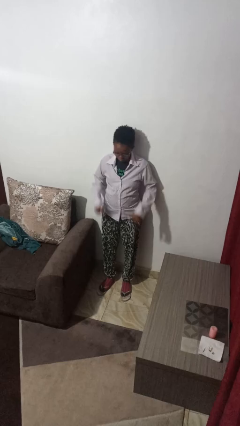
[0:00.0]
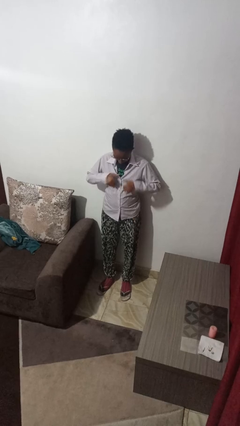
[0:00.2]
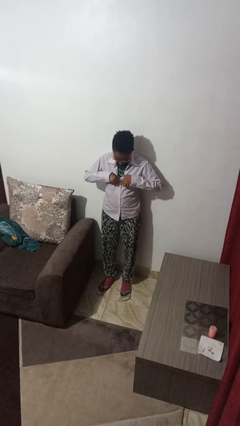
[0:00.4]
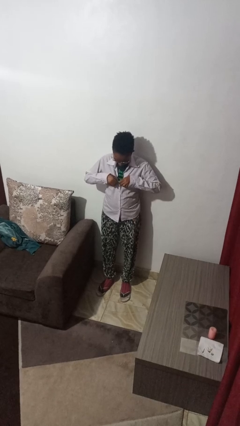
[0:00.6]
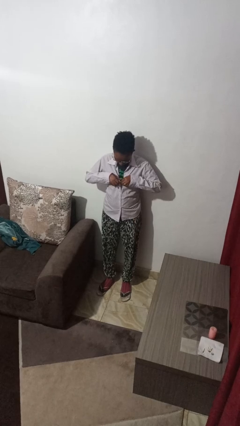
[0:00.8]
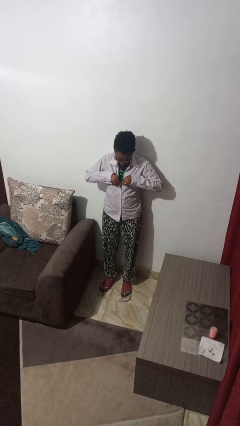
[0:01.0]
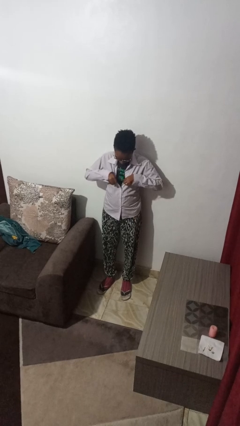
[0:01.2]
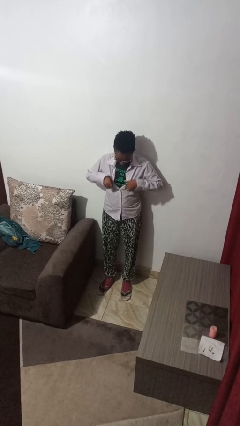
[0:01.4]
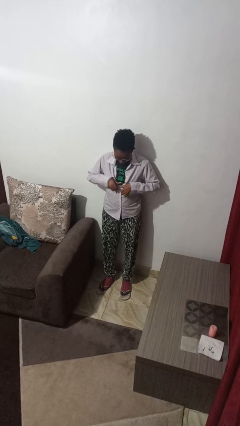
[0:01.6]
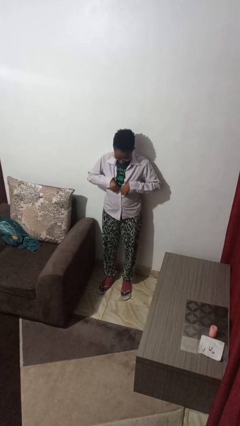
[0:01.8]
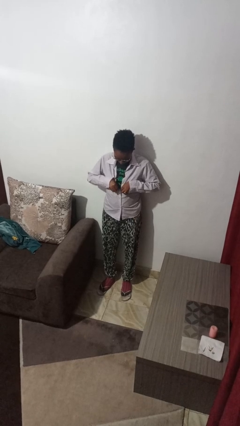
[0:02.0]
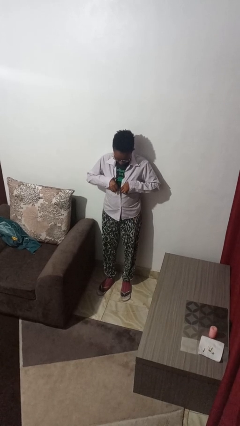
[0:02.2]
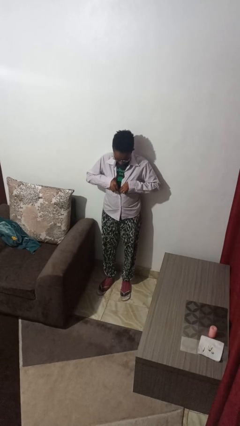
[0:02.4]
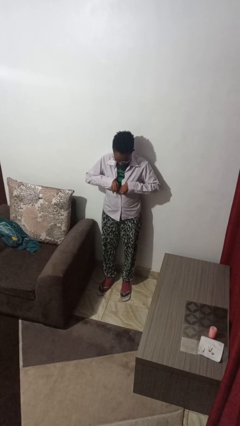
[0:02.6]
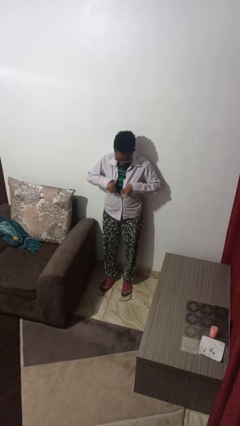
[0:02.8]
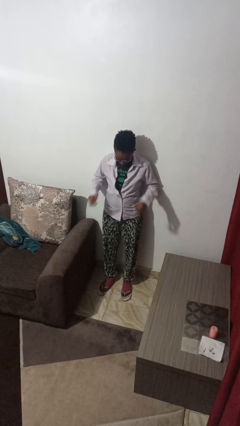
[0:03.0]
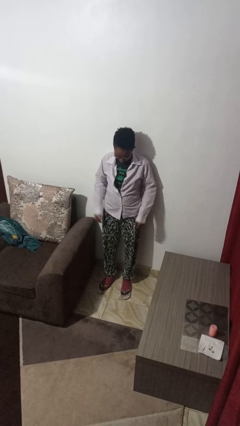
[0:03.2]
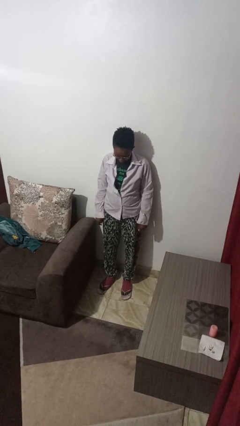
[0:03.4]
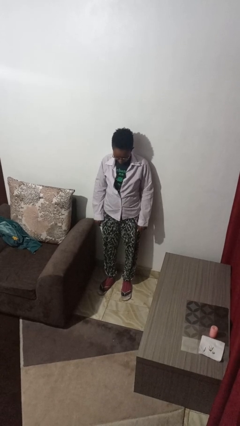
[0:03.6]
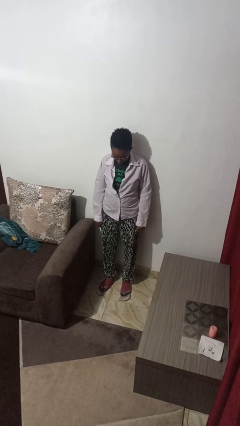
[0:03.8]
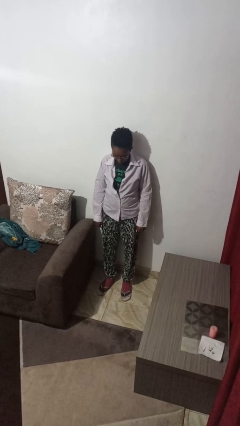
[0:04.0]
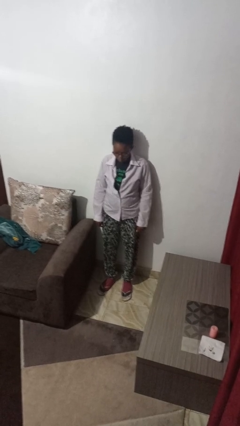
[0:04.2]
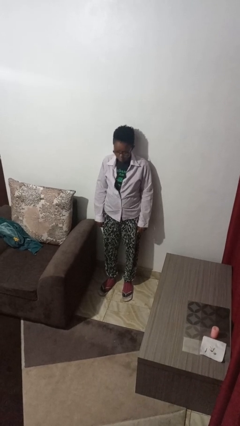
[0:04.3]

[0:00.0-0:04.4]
person unbuttons shirt

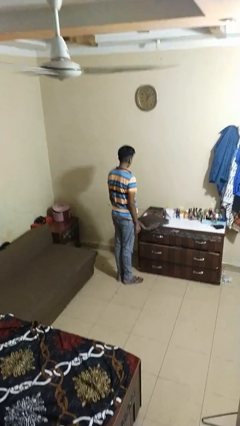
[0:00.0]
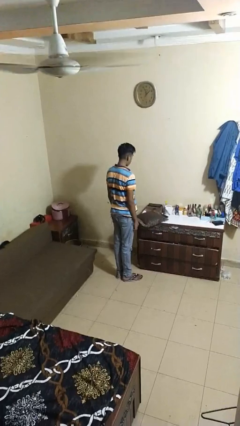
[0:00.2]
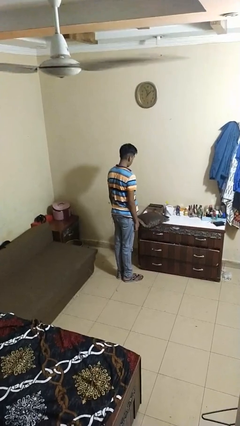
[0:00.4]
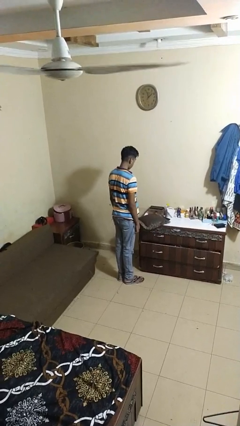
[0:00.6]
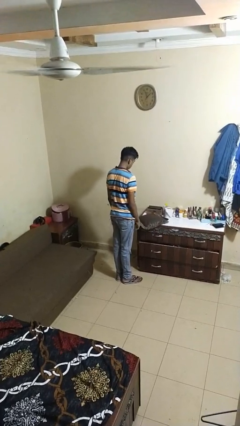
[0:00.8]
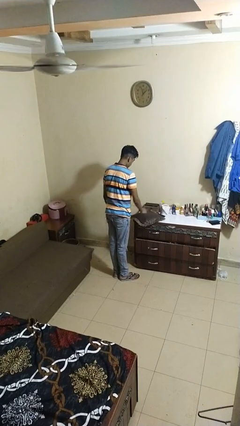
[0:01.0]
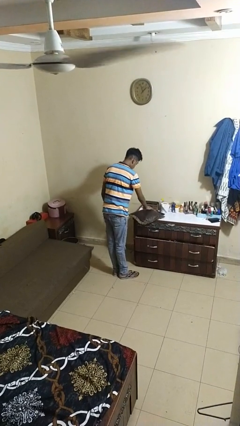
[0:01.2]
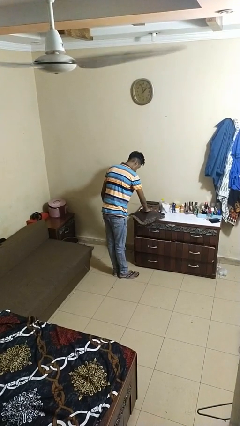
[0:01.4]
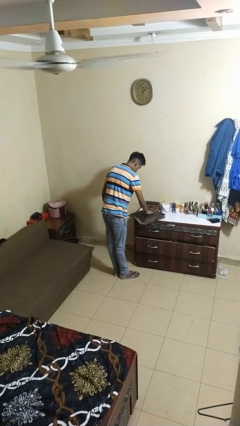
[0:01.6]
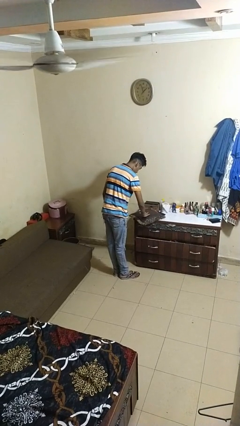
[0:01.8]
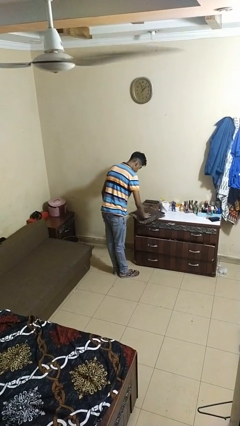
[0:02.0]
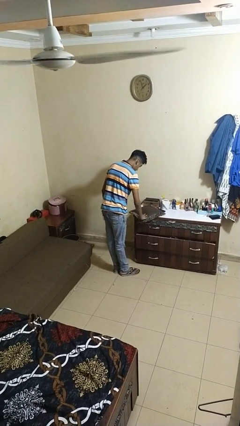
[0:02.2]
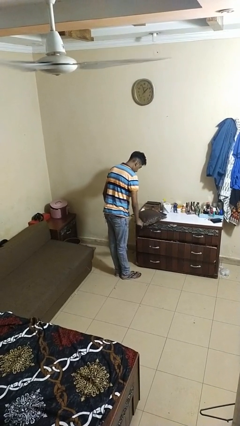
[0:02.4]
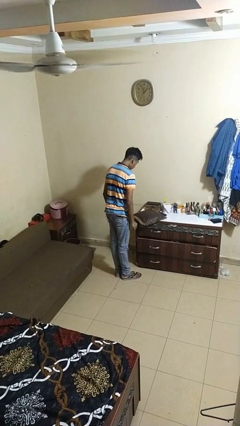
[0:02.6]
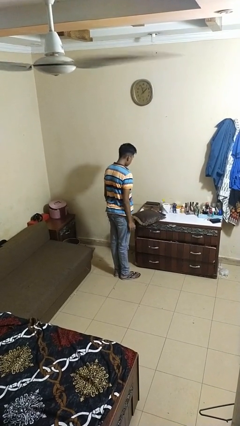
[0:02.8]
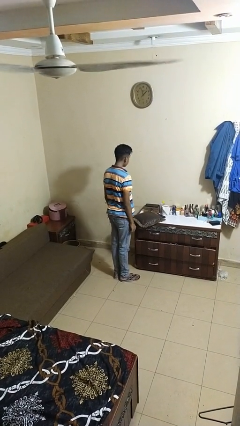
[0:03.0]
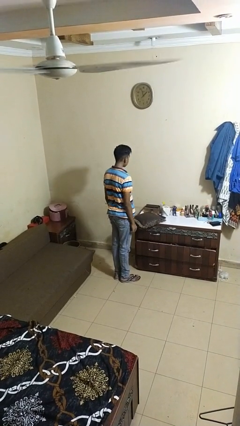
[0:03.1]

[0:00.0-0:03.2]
person waves hand over object

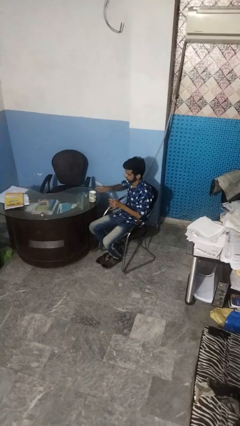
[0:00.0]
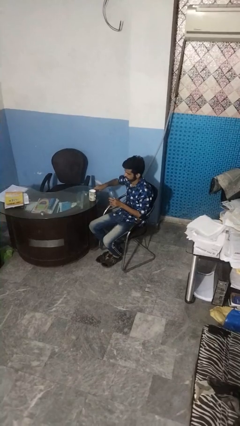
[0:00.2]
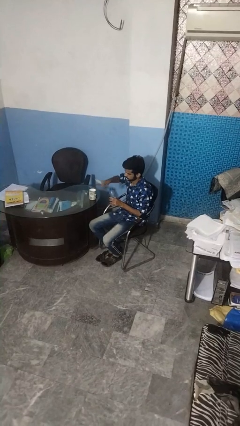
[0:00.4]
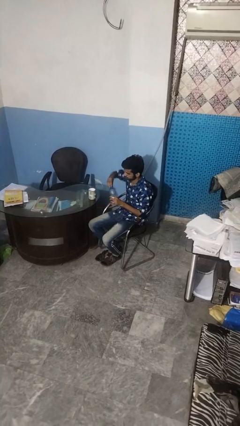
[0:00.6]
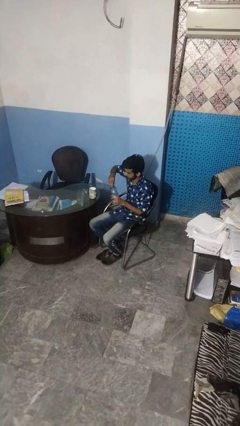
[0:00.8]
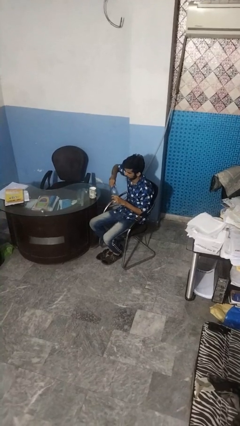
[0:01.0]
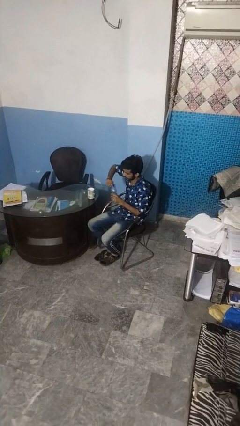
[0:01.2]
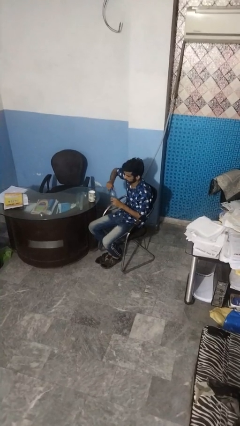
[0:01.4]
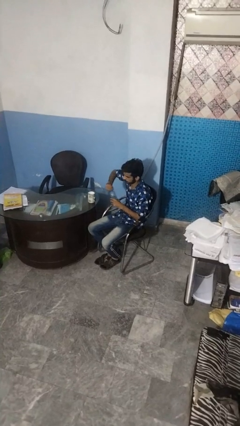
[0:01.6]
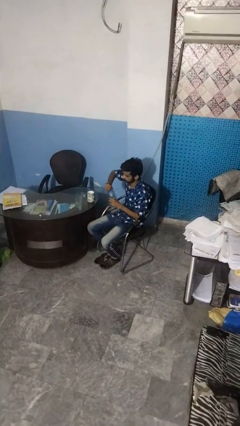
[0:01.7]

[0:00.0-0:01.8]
person screws lid to bottle

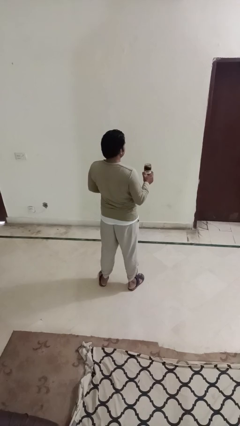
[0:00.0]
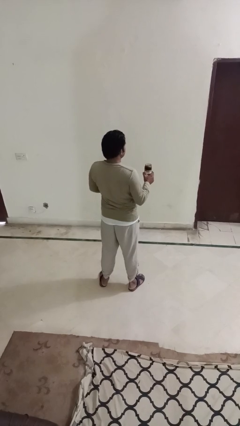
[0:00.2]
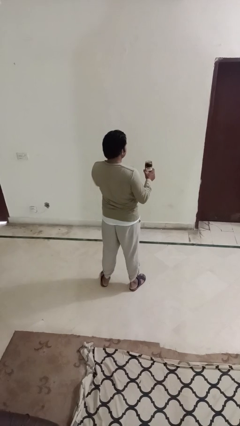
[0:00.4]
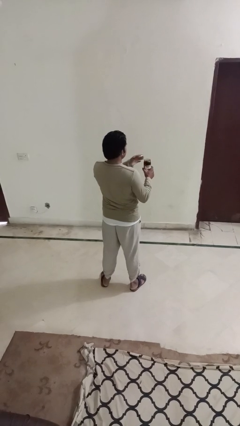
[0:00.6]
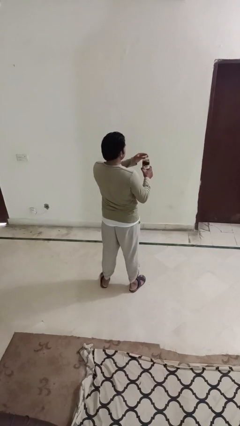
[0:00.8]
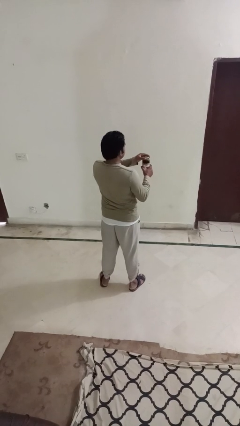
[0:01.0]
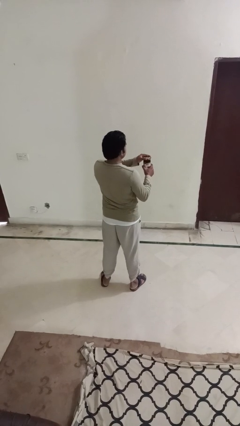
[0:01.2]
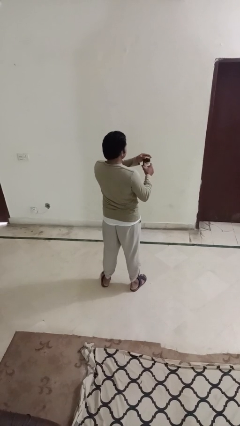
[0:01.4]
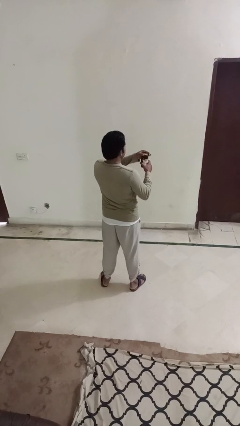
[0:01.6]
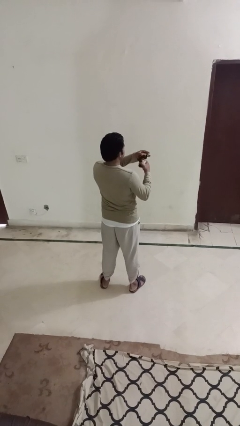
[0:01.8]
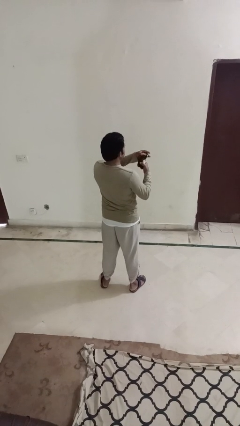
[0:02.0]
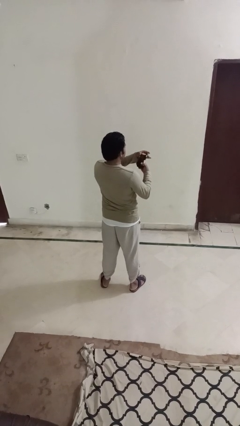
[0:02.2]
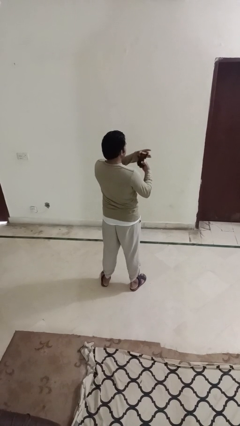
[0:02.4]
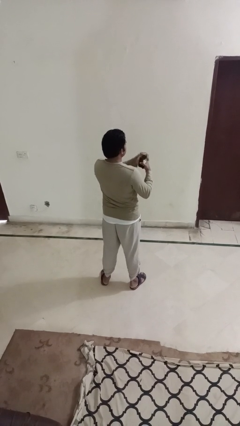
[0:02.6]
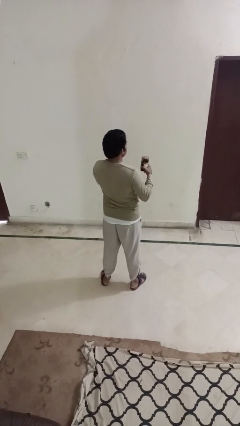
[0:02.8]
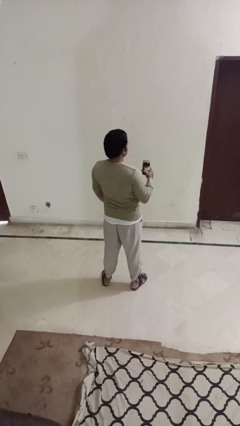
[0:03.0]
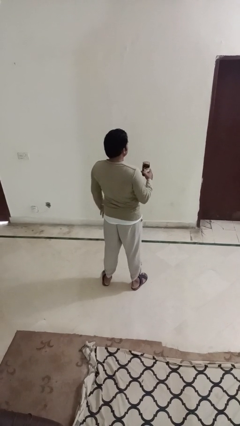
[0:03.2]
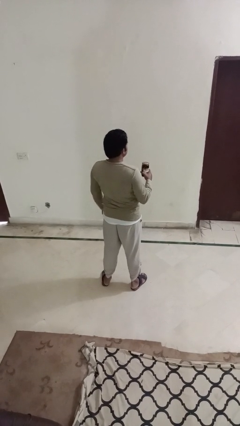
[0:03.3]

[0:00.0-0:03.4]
person closes jar

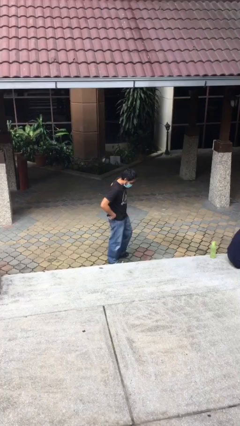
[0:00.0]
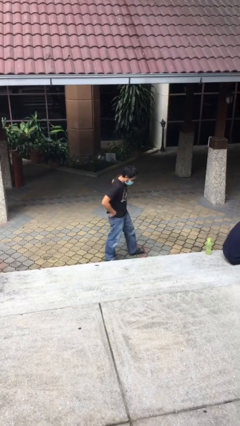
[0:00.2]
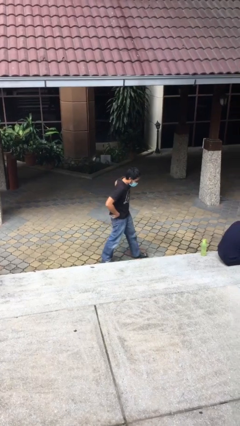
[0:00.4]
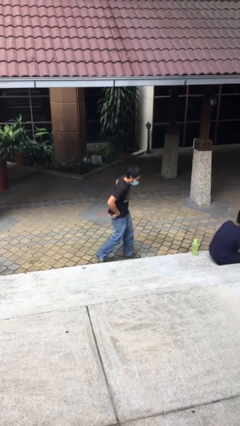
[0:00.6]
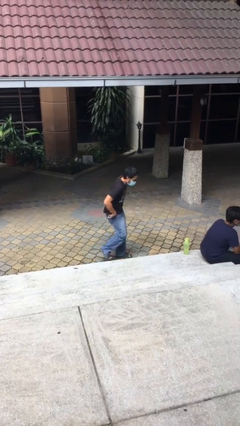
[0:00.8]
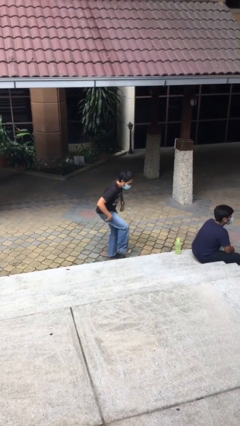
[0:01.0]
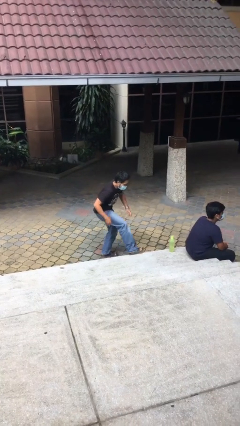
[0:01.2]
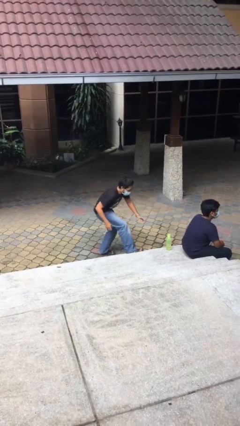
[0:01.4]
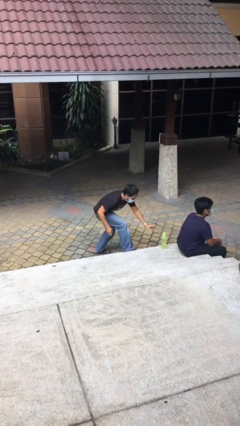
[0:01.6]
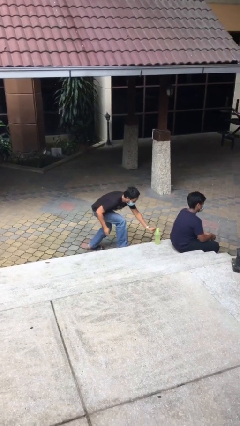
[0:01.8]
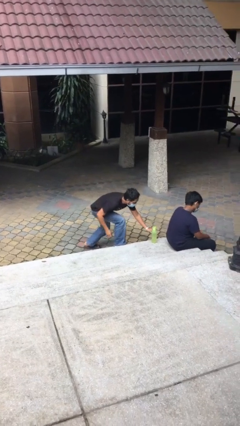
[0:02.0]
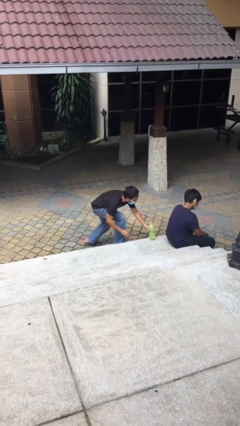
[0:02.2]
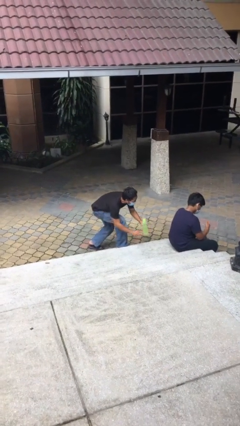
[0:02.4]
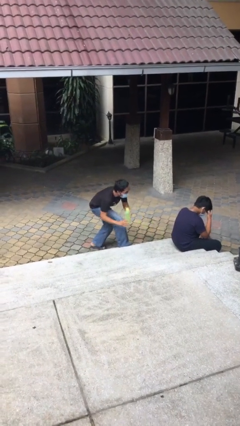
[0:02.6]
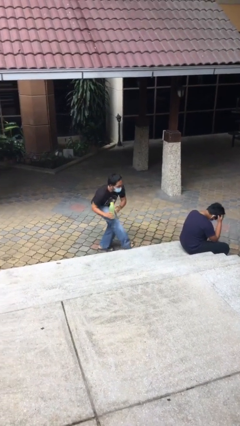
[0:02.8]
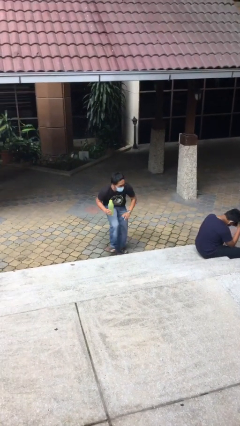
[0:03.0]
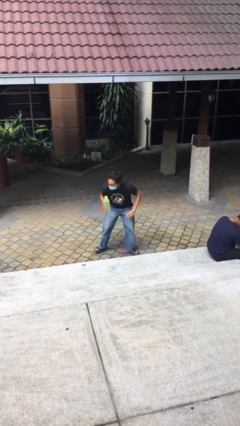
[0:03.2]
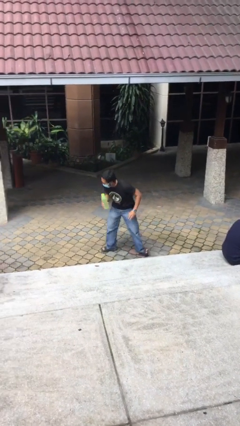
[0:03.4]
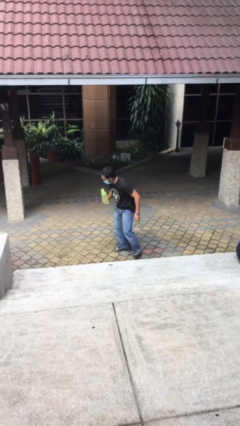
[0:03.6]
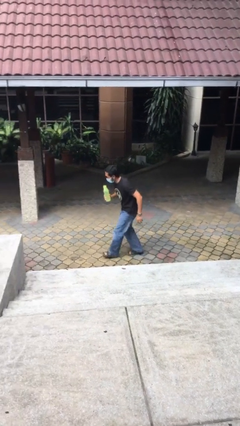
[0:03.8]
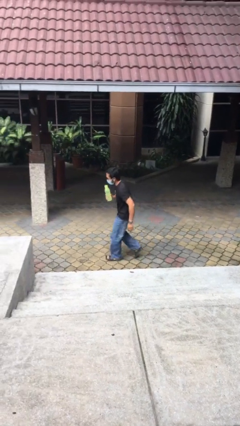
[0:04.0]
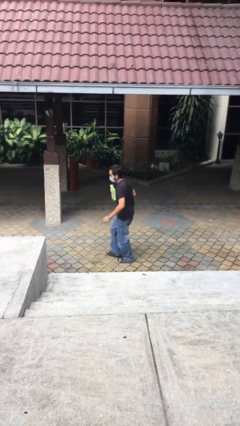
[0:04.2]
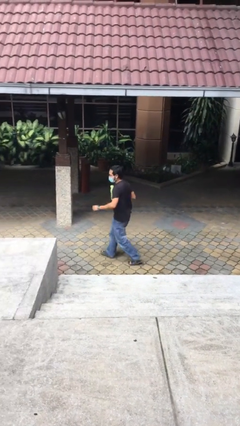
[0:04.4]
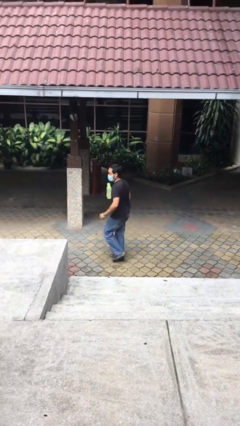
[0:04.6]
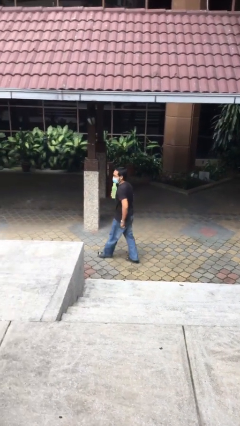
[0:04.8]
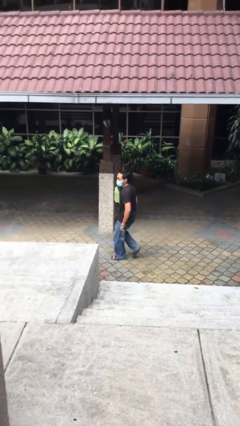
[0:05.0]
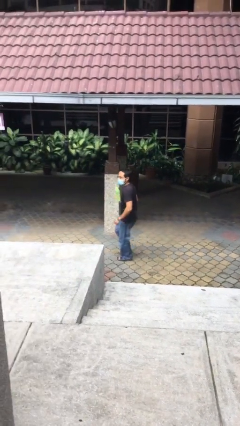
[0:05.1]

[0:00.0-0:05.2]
person steals object from person
